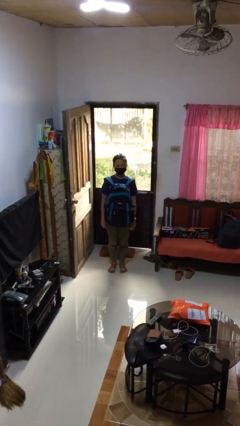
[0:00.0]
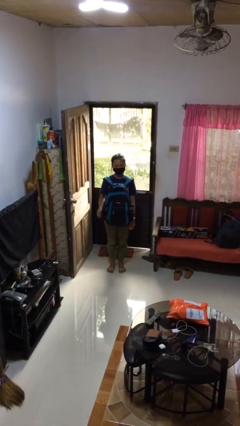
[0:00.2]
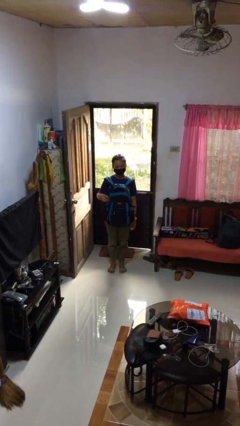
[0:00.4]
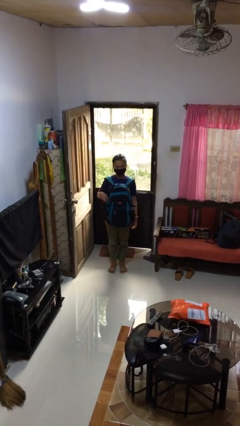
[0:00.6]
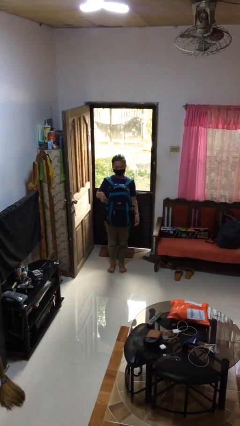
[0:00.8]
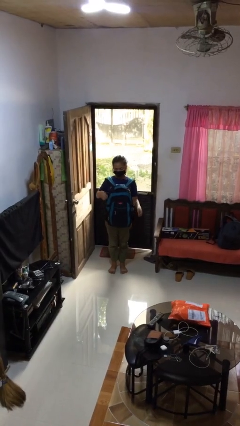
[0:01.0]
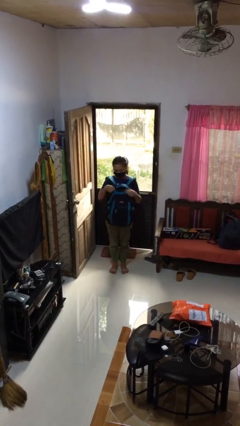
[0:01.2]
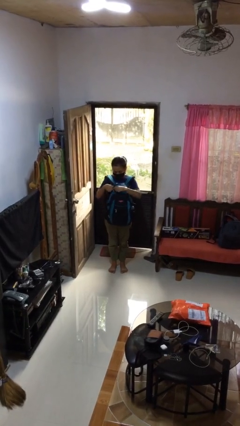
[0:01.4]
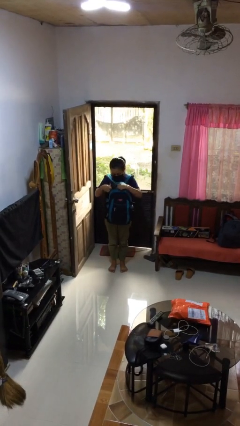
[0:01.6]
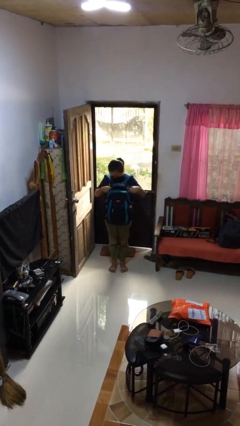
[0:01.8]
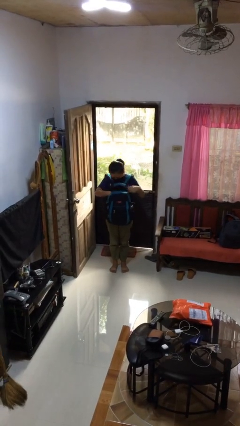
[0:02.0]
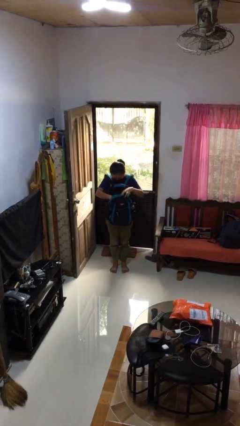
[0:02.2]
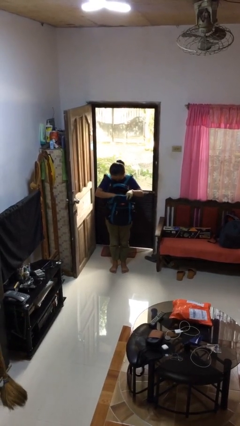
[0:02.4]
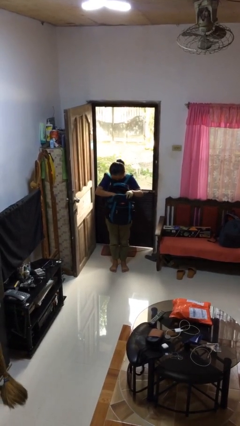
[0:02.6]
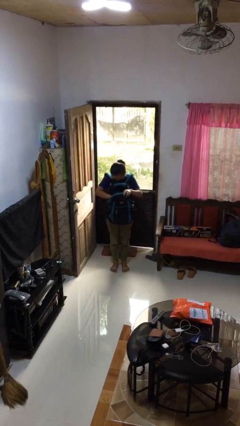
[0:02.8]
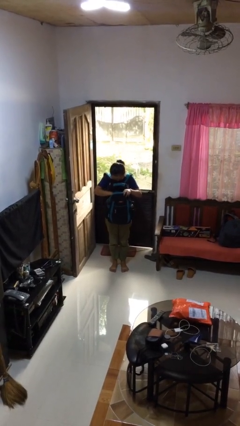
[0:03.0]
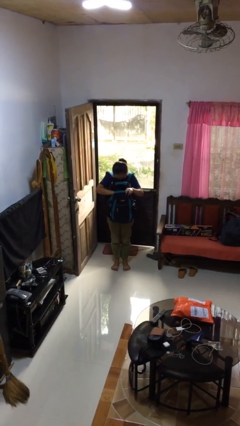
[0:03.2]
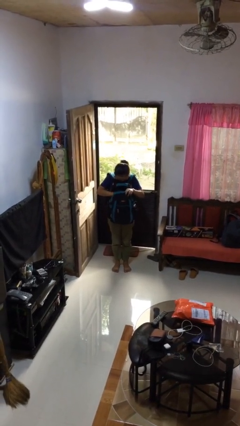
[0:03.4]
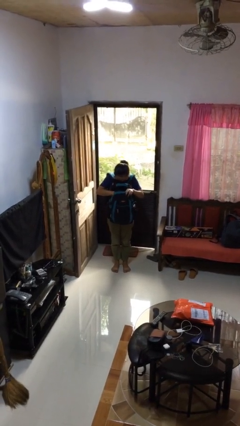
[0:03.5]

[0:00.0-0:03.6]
person searches in backpack

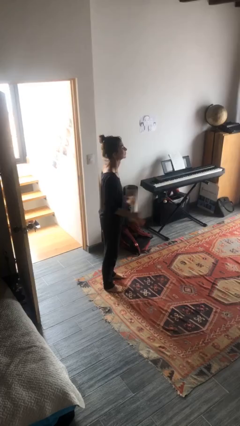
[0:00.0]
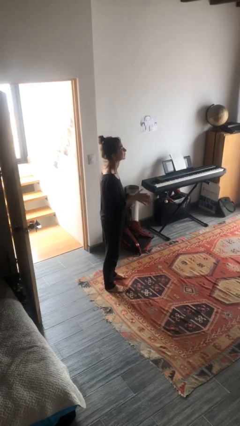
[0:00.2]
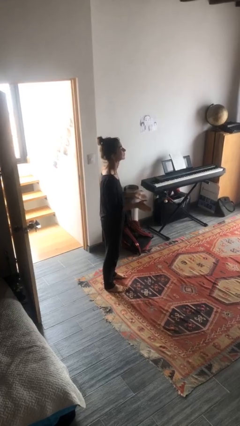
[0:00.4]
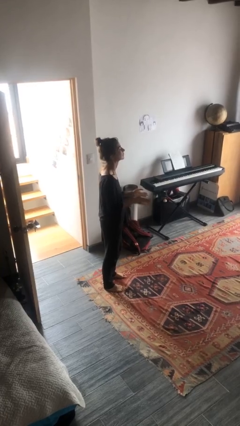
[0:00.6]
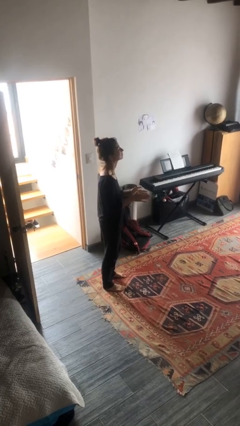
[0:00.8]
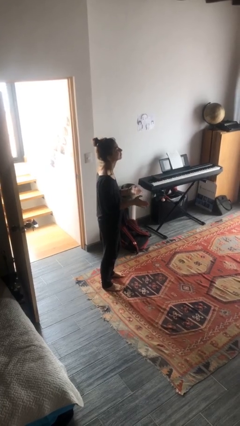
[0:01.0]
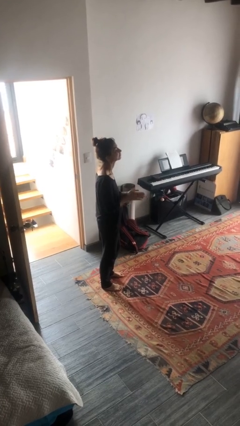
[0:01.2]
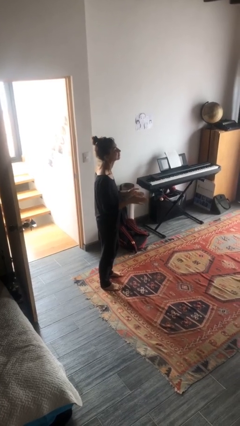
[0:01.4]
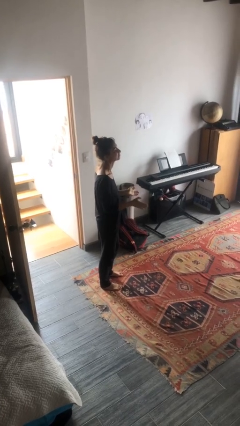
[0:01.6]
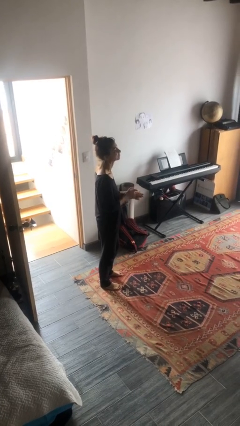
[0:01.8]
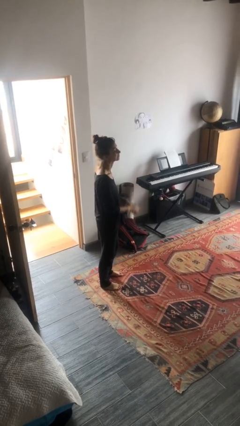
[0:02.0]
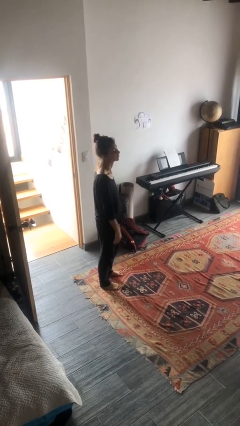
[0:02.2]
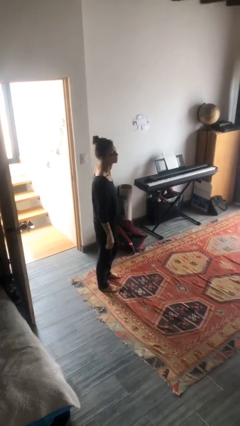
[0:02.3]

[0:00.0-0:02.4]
person claps hands

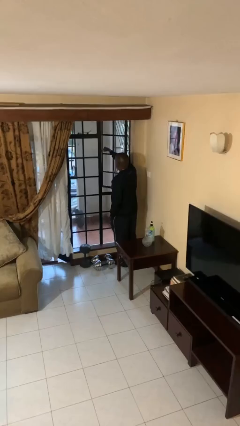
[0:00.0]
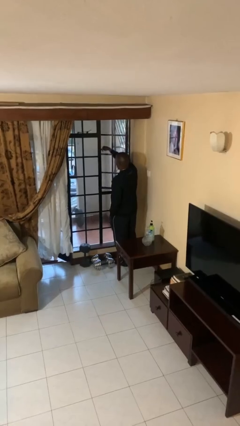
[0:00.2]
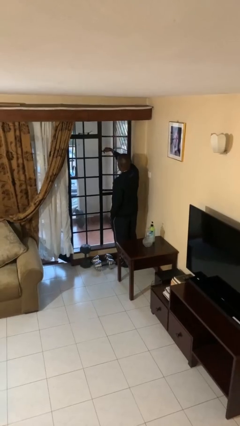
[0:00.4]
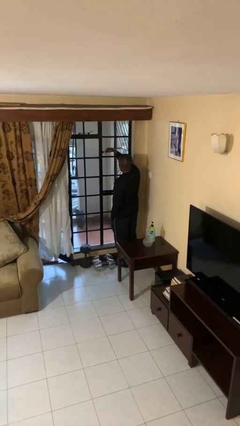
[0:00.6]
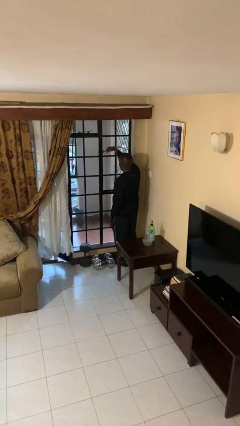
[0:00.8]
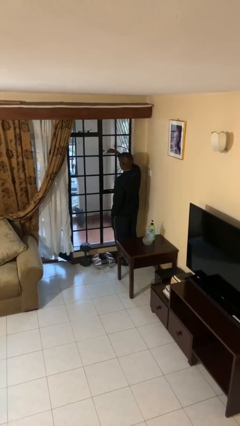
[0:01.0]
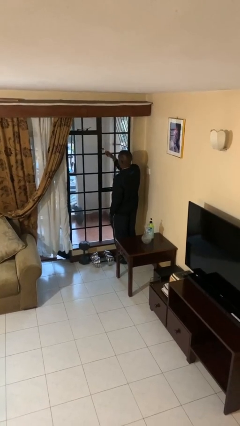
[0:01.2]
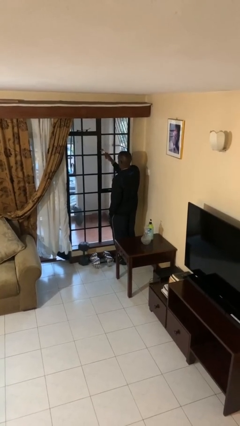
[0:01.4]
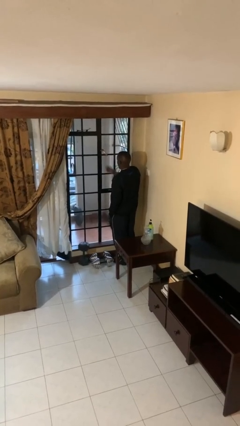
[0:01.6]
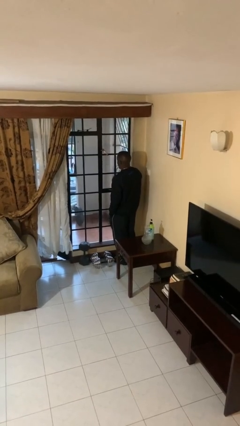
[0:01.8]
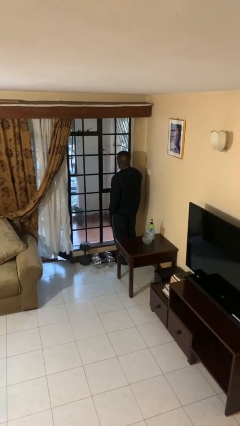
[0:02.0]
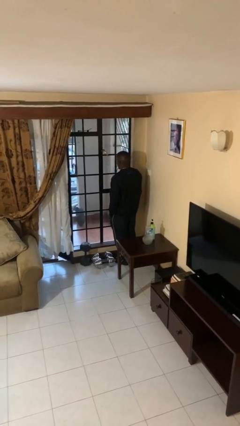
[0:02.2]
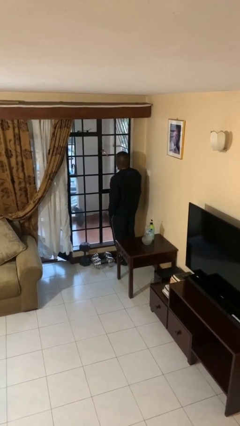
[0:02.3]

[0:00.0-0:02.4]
person closes home window

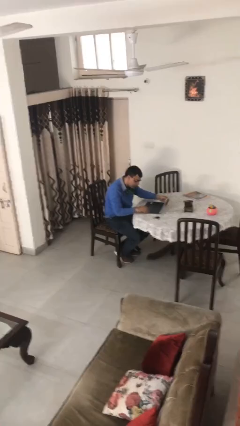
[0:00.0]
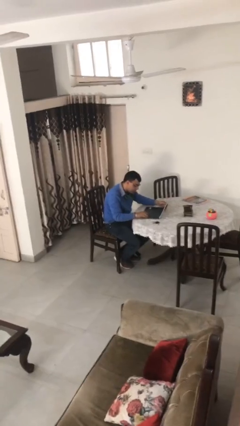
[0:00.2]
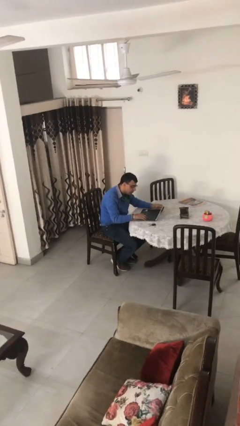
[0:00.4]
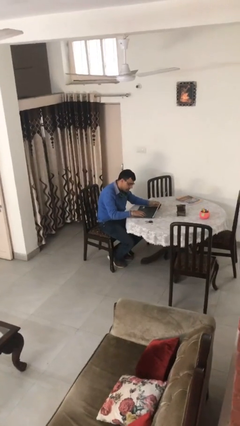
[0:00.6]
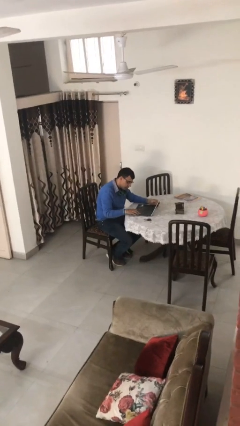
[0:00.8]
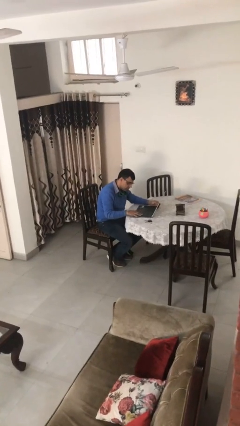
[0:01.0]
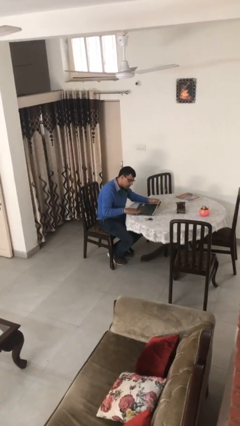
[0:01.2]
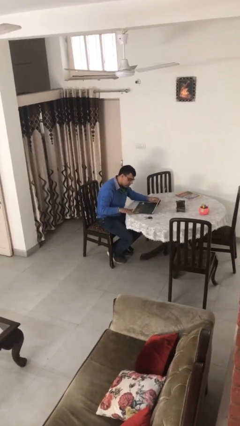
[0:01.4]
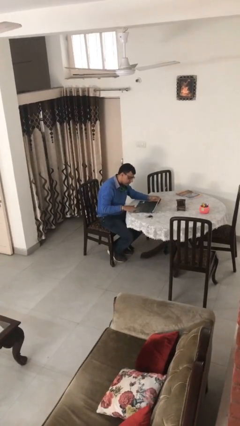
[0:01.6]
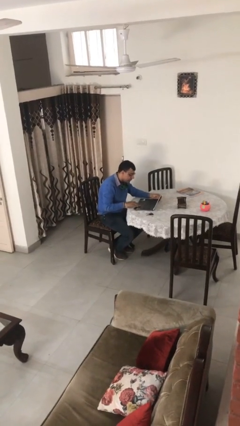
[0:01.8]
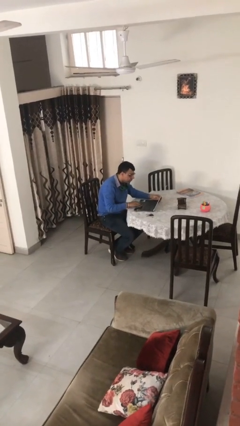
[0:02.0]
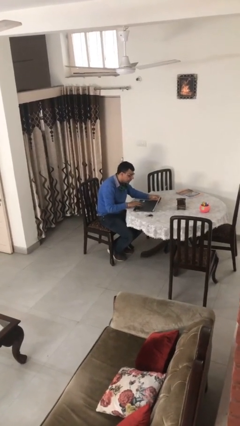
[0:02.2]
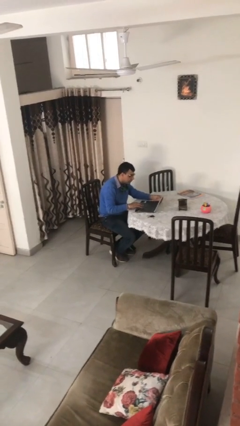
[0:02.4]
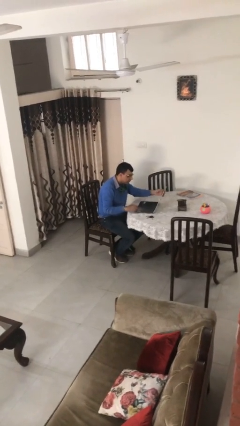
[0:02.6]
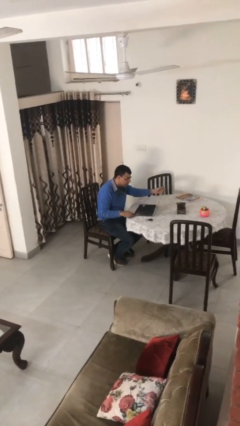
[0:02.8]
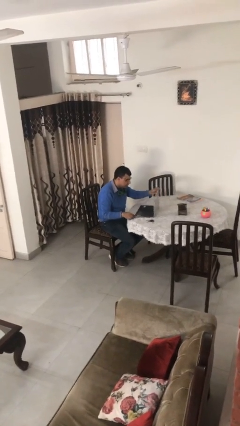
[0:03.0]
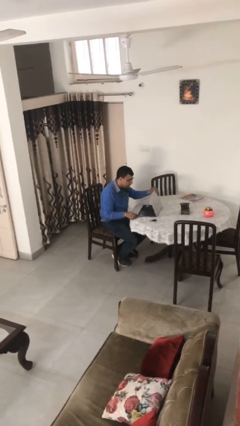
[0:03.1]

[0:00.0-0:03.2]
person interacts with laptop

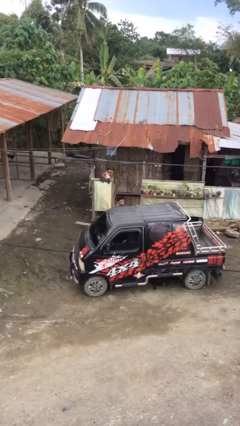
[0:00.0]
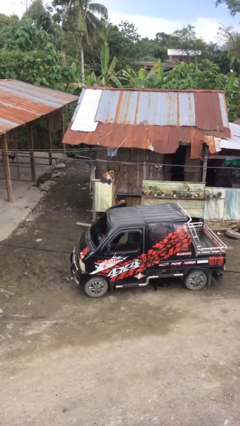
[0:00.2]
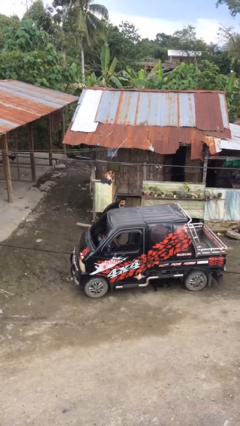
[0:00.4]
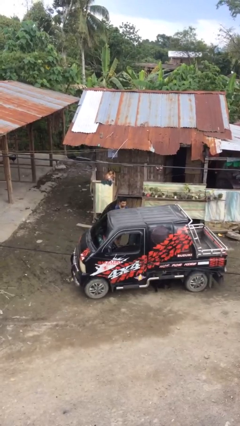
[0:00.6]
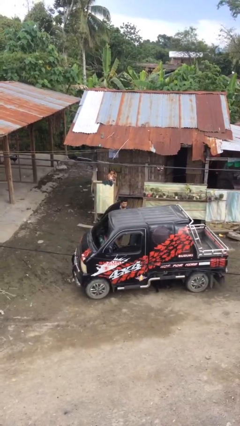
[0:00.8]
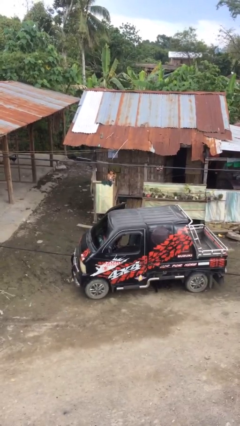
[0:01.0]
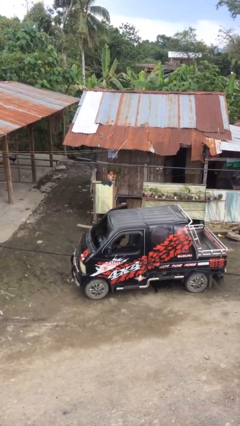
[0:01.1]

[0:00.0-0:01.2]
person opens car door

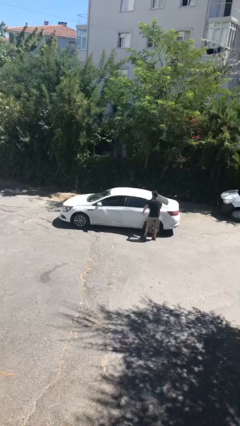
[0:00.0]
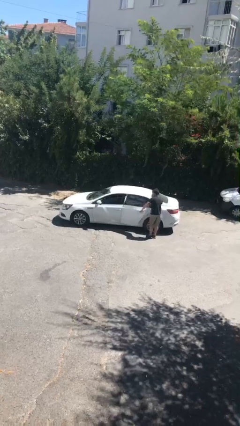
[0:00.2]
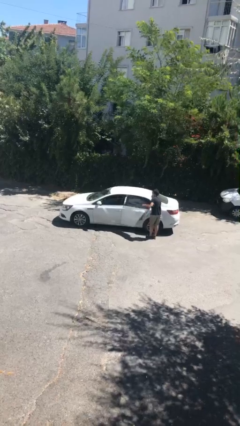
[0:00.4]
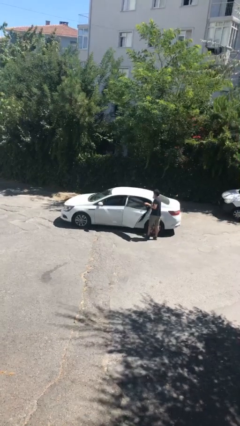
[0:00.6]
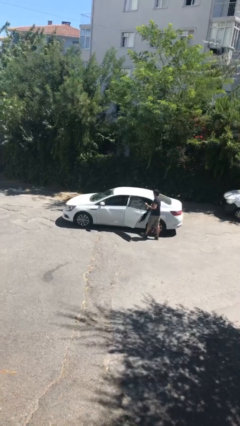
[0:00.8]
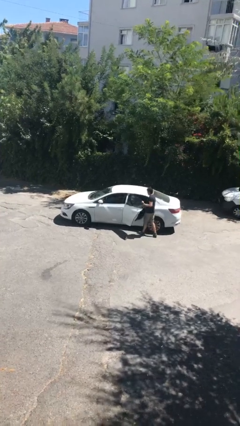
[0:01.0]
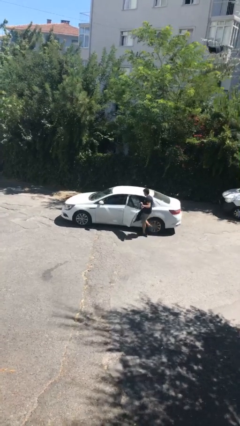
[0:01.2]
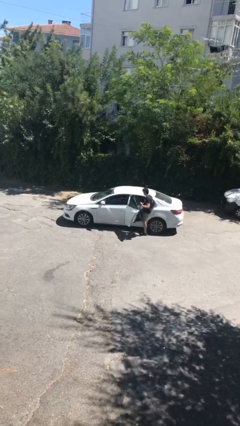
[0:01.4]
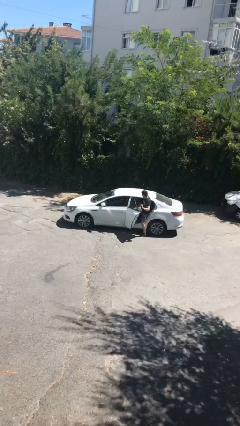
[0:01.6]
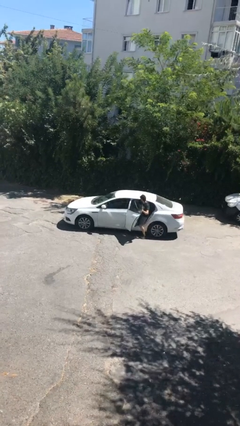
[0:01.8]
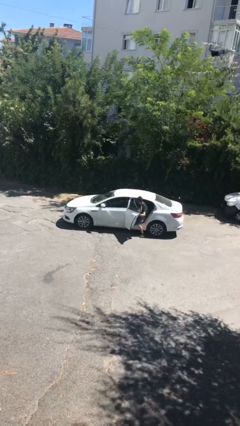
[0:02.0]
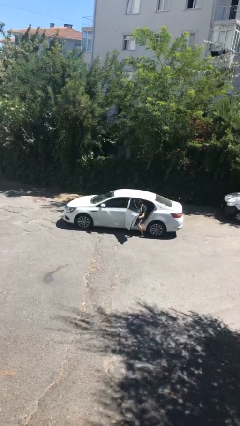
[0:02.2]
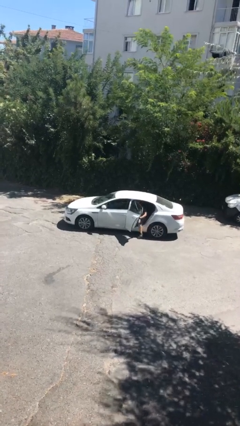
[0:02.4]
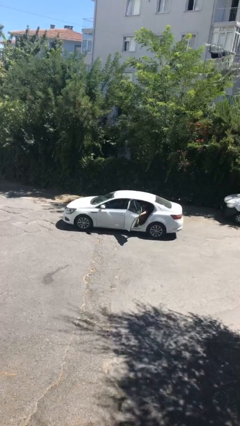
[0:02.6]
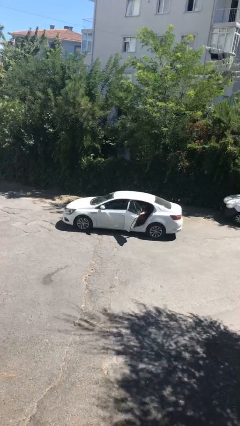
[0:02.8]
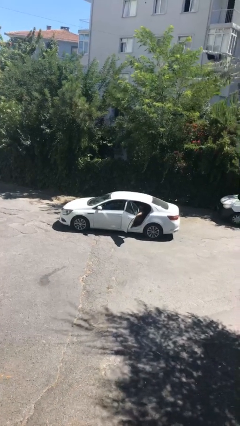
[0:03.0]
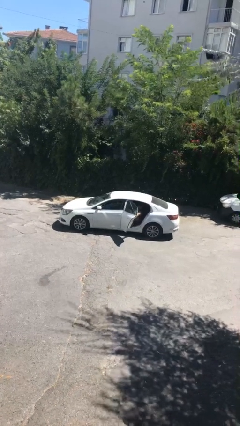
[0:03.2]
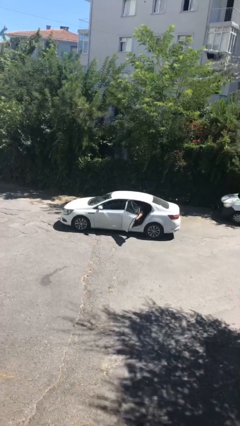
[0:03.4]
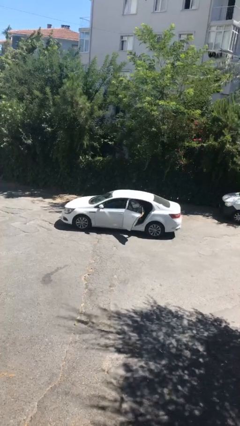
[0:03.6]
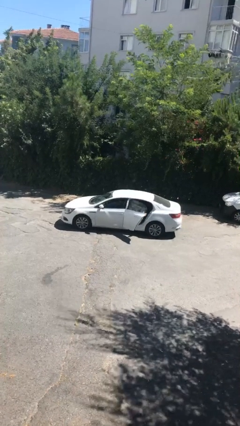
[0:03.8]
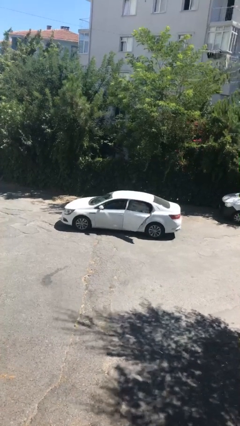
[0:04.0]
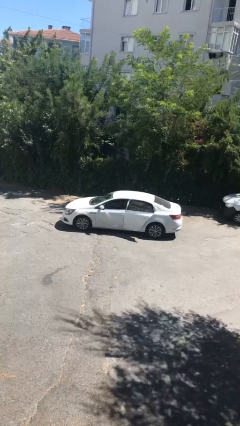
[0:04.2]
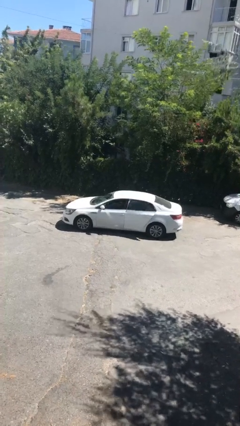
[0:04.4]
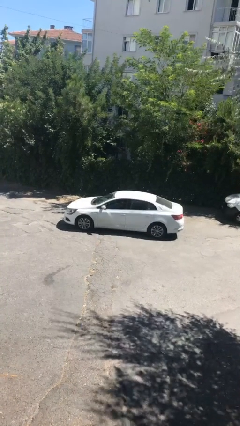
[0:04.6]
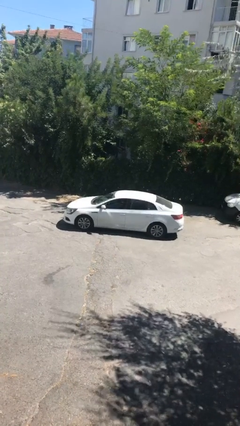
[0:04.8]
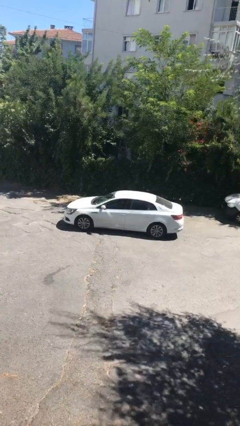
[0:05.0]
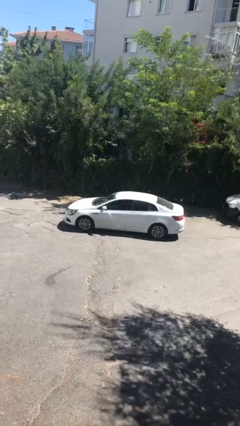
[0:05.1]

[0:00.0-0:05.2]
car picks up person
